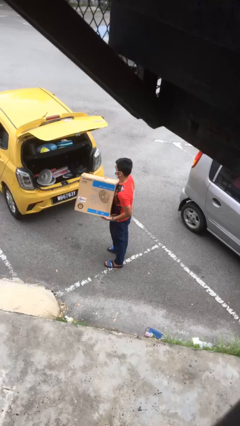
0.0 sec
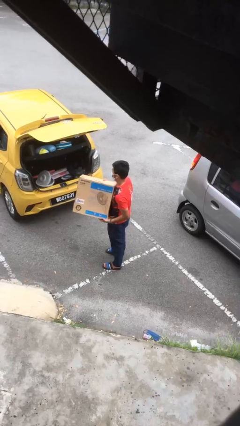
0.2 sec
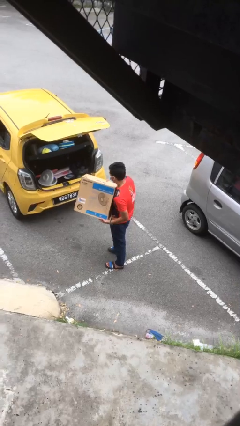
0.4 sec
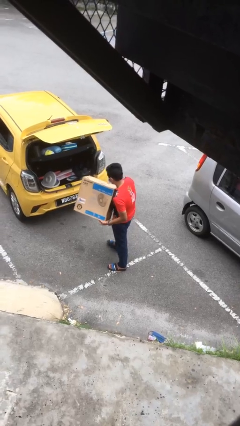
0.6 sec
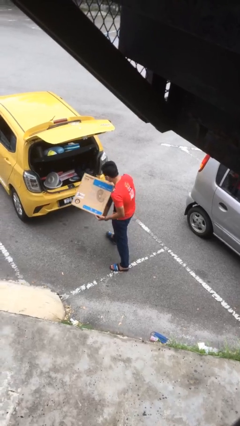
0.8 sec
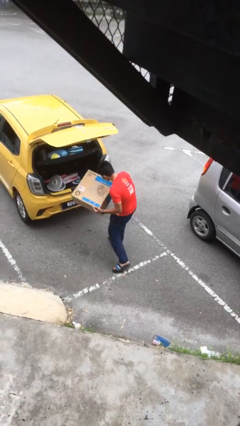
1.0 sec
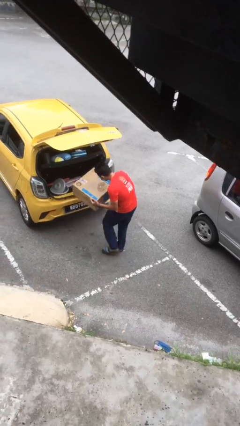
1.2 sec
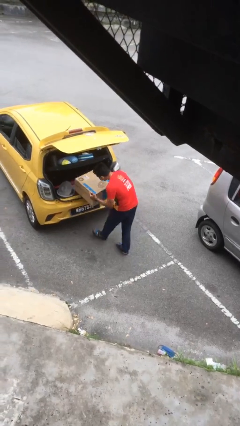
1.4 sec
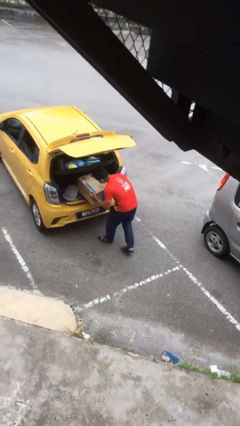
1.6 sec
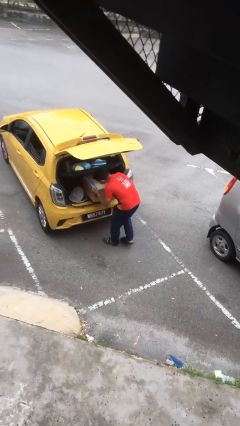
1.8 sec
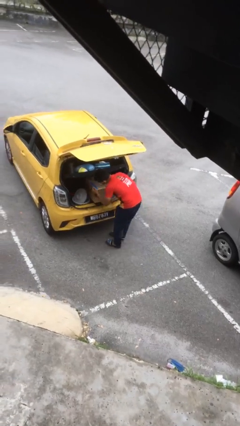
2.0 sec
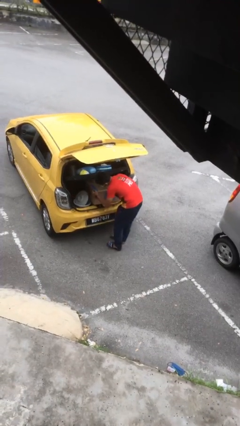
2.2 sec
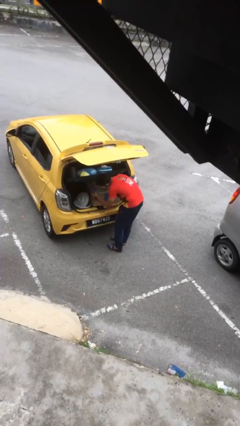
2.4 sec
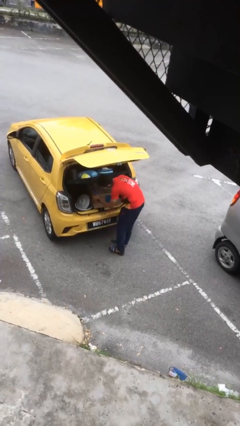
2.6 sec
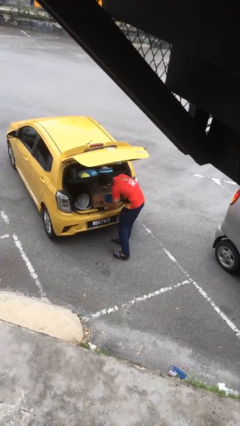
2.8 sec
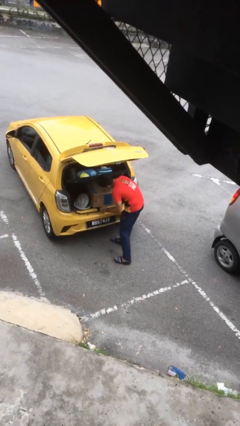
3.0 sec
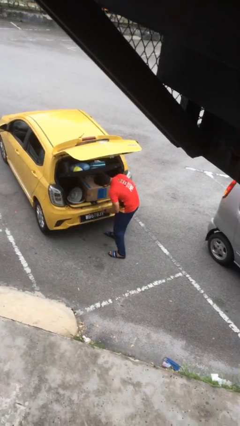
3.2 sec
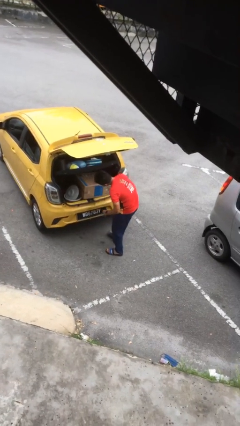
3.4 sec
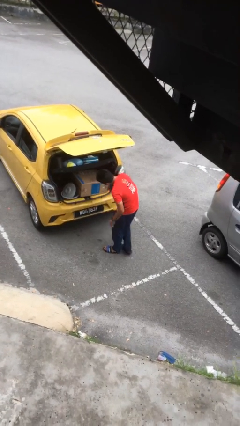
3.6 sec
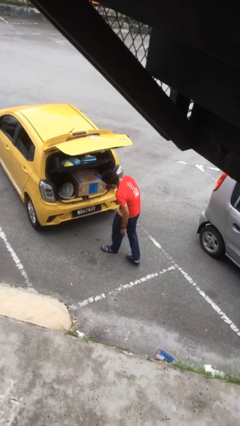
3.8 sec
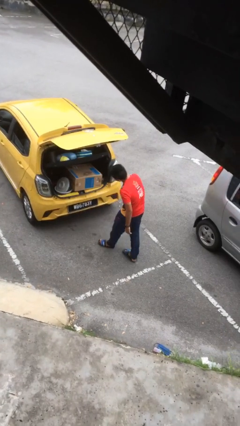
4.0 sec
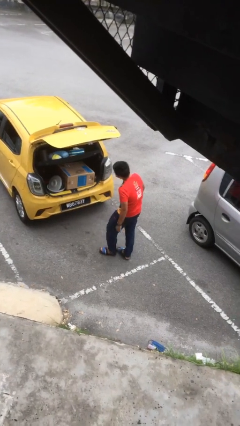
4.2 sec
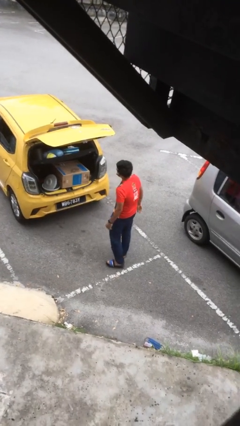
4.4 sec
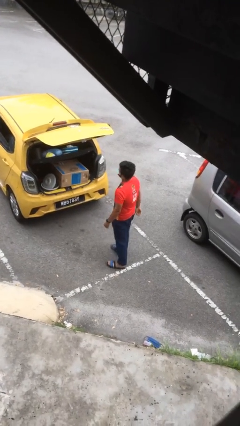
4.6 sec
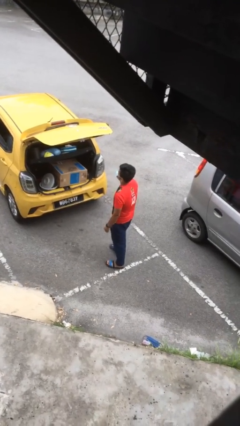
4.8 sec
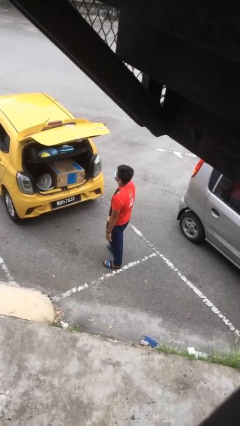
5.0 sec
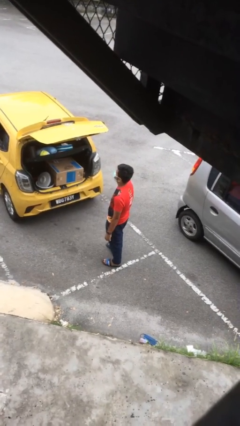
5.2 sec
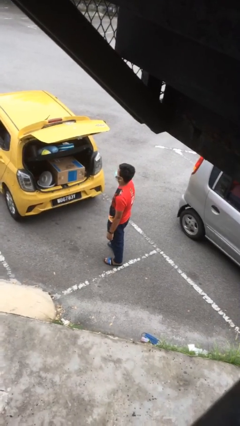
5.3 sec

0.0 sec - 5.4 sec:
person loads car

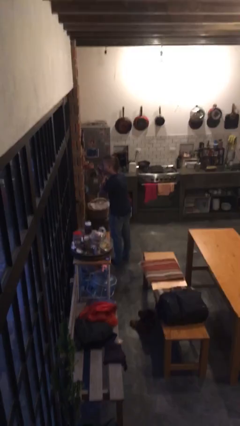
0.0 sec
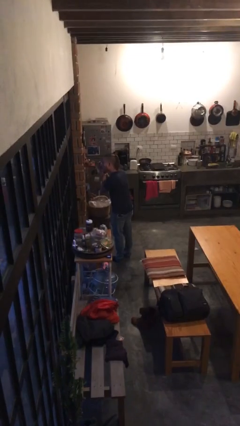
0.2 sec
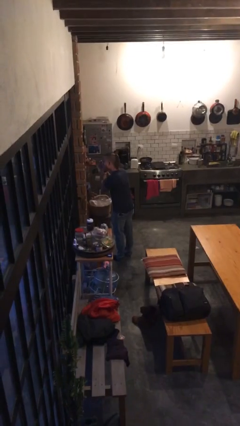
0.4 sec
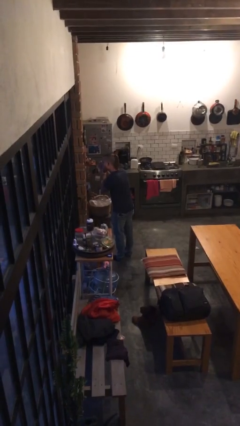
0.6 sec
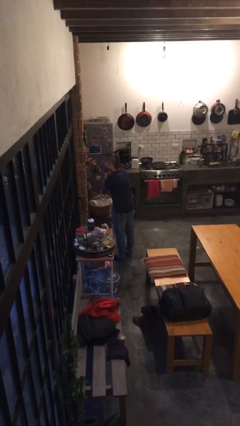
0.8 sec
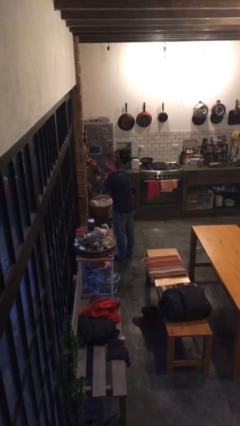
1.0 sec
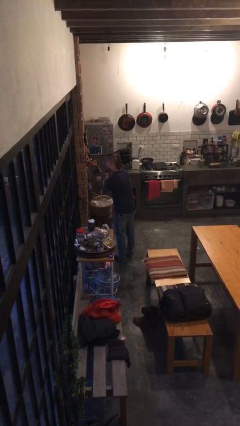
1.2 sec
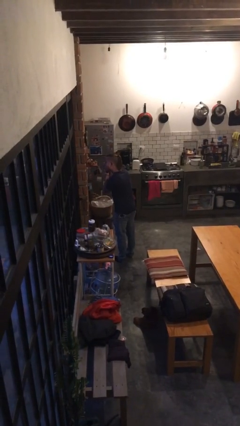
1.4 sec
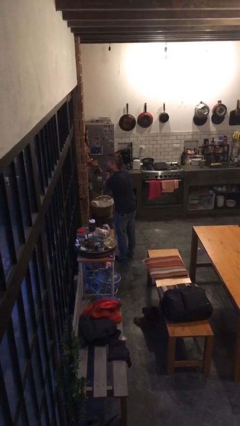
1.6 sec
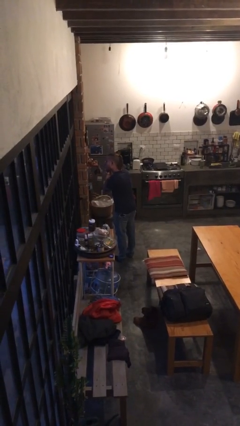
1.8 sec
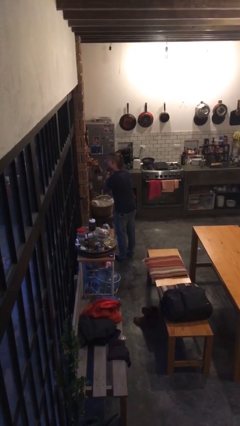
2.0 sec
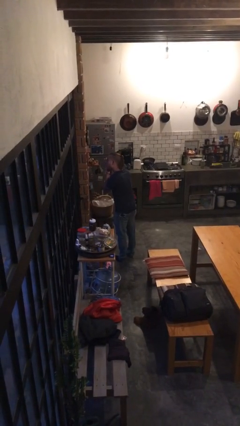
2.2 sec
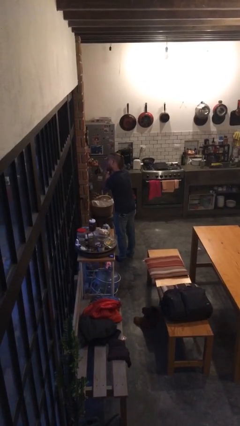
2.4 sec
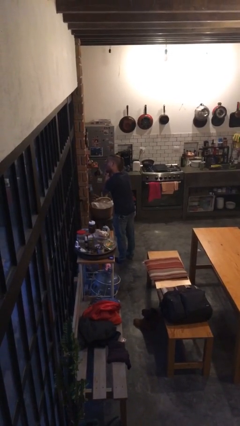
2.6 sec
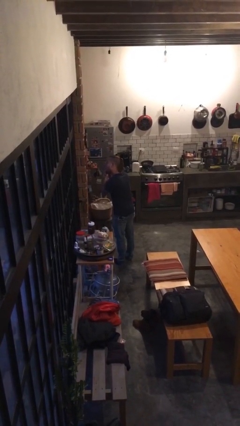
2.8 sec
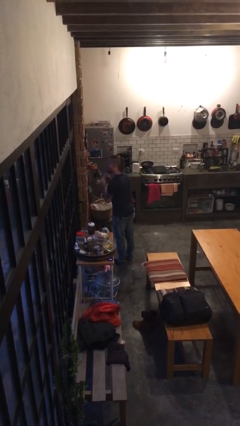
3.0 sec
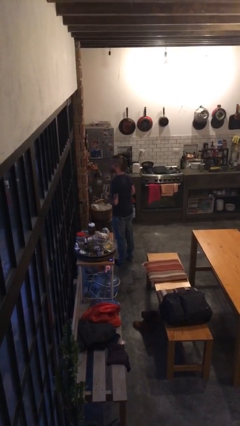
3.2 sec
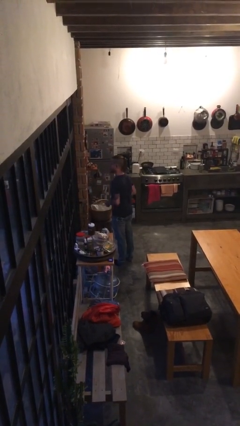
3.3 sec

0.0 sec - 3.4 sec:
person applies eye makeup

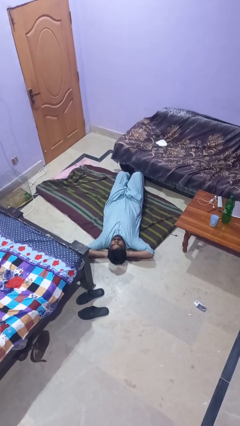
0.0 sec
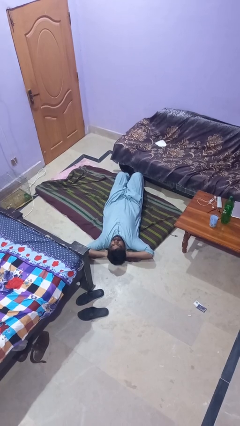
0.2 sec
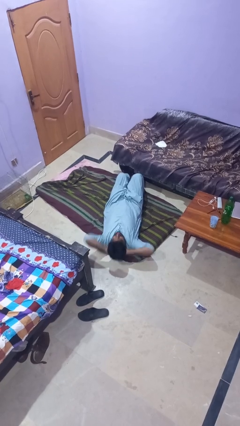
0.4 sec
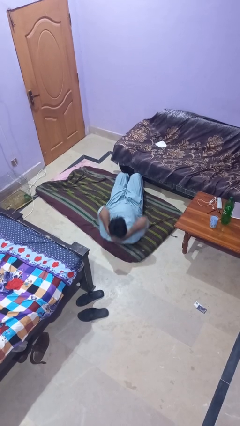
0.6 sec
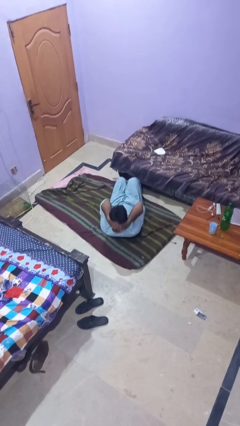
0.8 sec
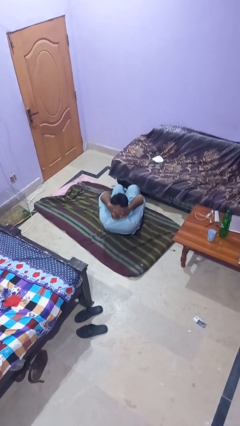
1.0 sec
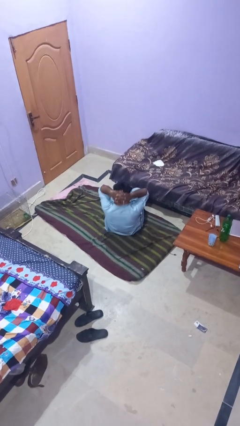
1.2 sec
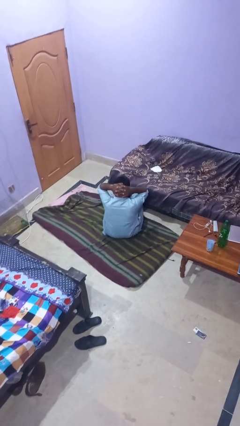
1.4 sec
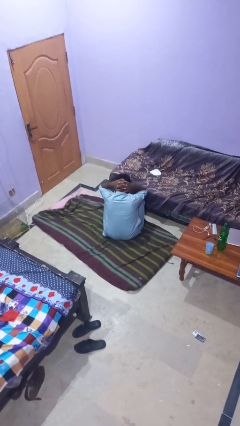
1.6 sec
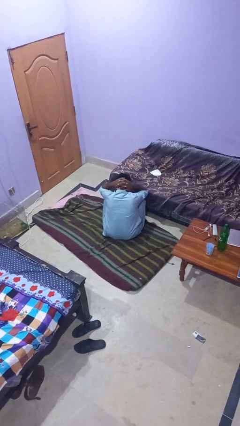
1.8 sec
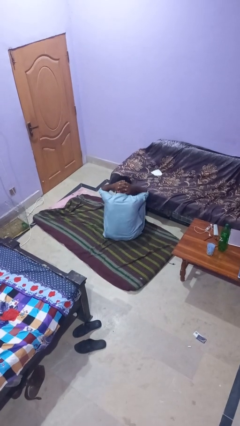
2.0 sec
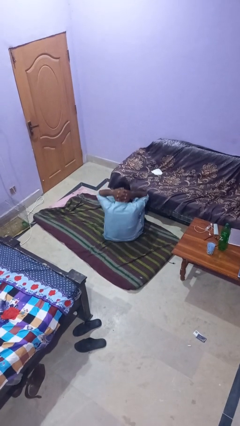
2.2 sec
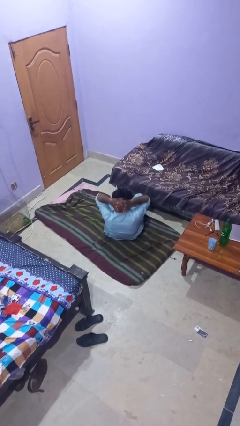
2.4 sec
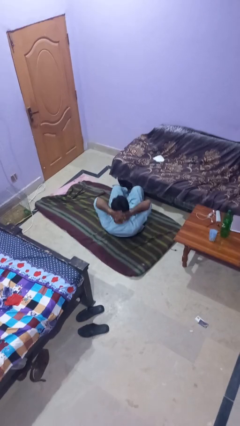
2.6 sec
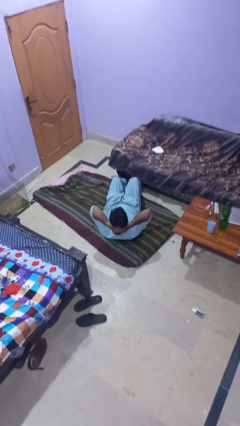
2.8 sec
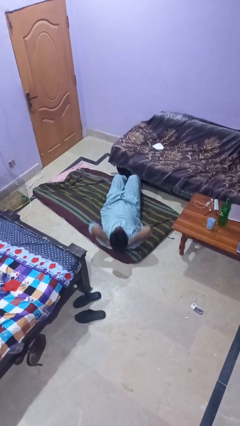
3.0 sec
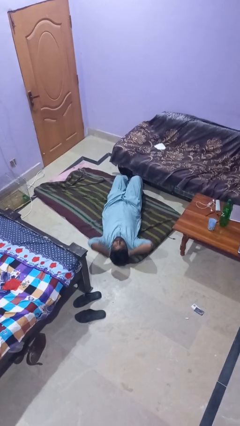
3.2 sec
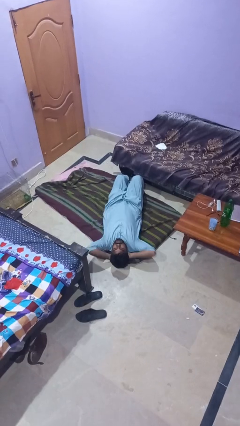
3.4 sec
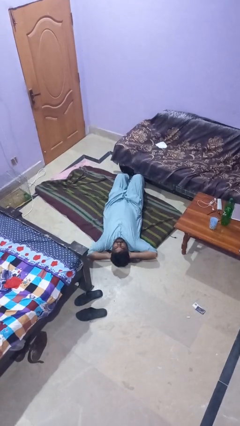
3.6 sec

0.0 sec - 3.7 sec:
person exercises with situp

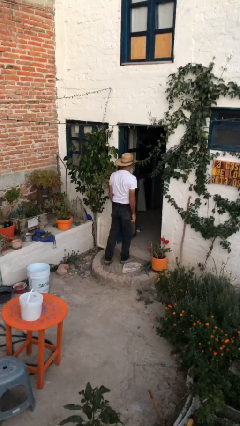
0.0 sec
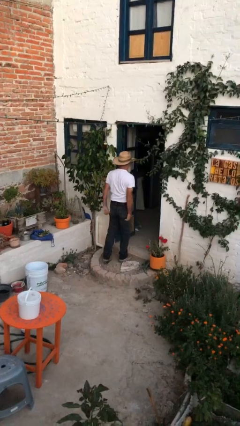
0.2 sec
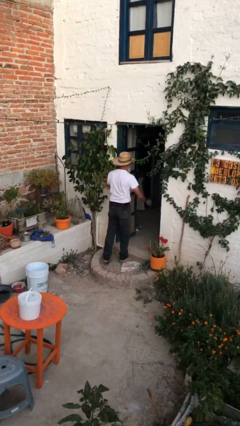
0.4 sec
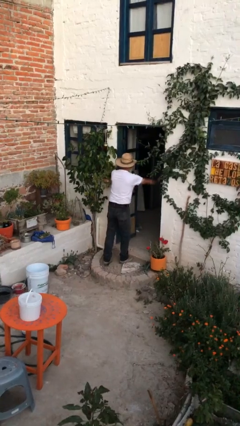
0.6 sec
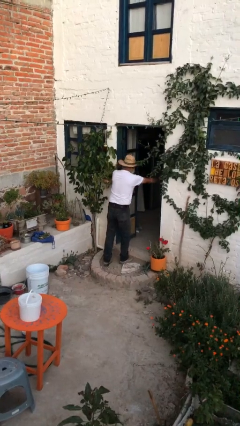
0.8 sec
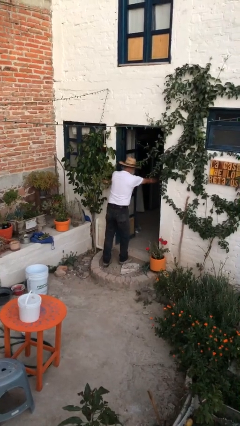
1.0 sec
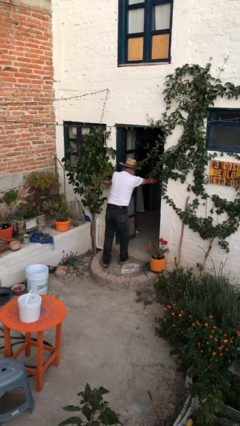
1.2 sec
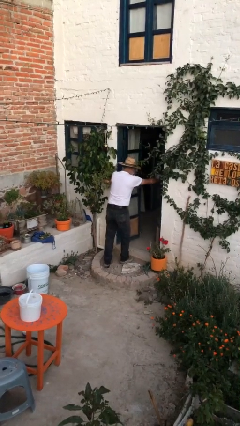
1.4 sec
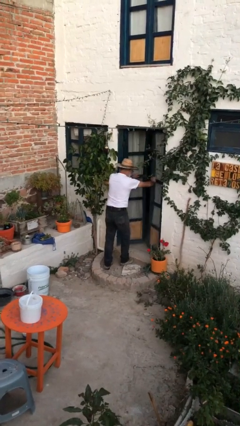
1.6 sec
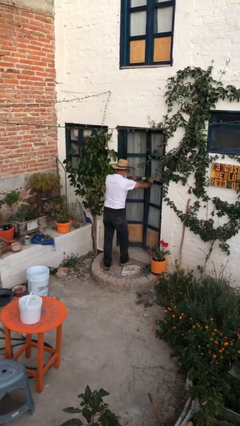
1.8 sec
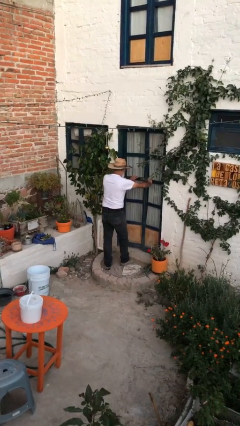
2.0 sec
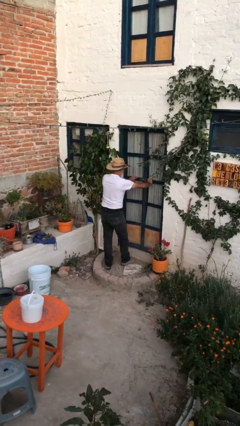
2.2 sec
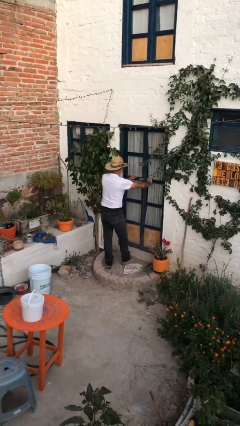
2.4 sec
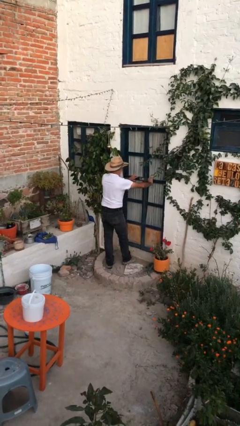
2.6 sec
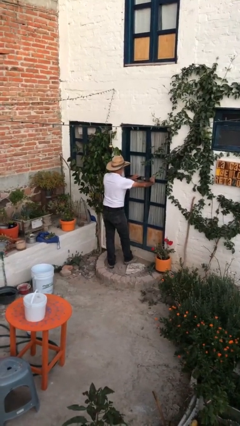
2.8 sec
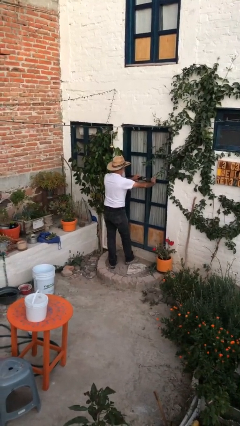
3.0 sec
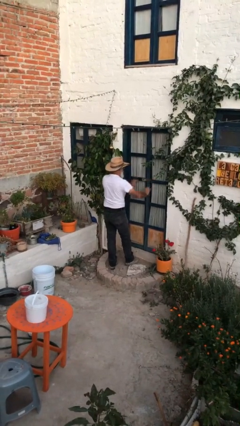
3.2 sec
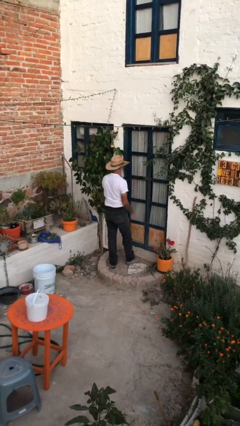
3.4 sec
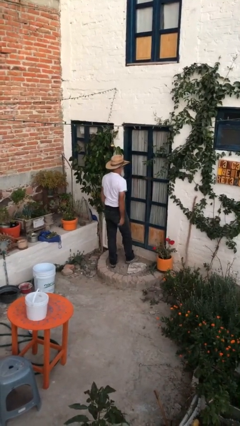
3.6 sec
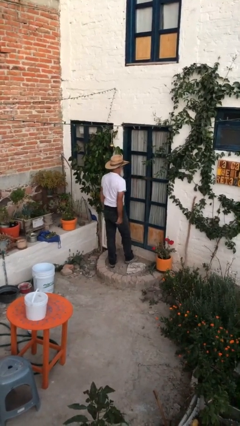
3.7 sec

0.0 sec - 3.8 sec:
person closes facility door

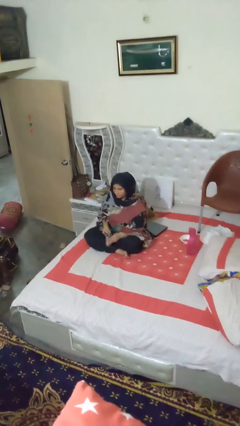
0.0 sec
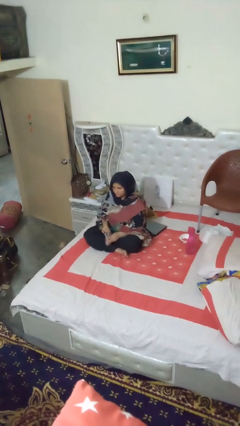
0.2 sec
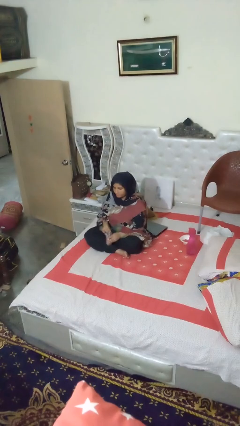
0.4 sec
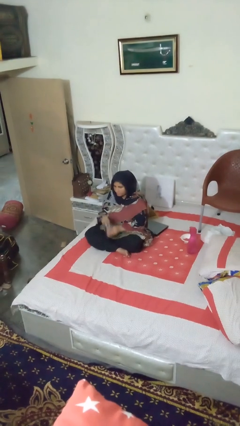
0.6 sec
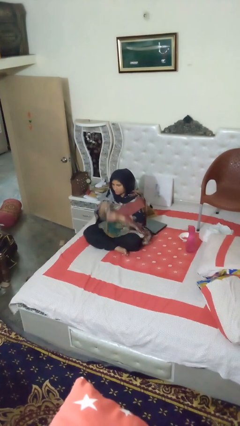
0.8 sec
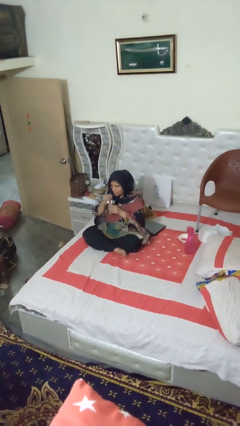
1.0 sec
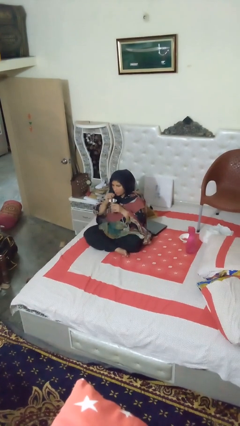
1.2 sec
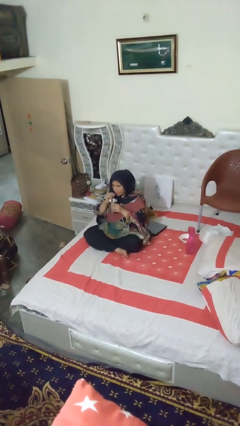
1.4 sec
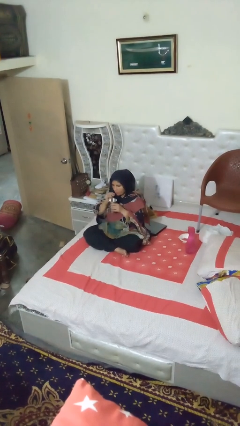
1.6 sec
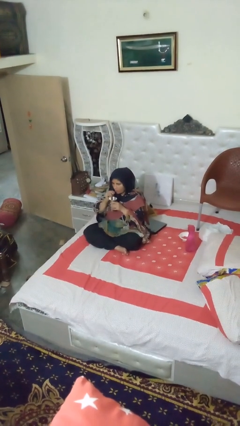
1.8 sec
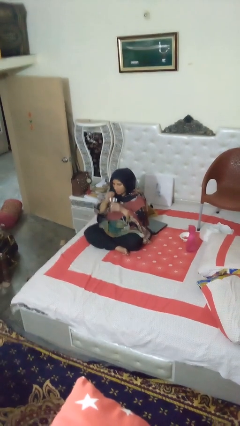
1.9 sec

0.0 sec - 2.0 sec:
person drinks from straw
